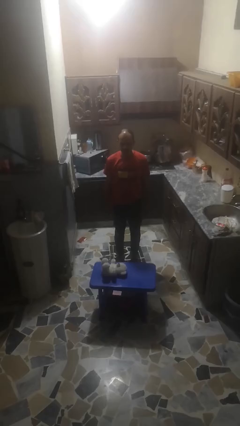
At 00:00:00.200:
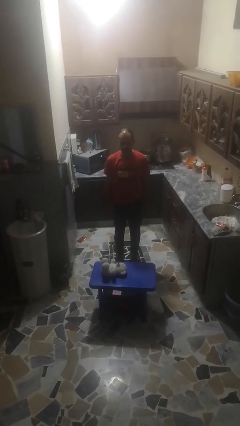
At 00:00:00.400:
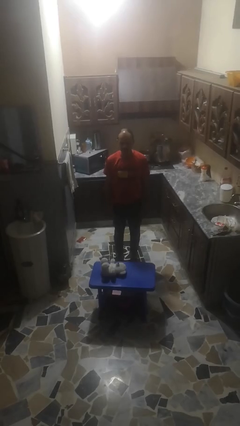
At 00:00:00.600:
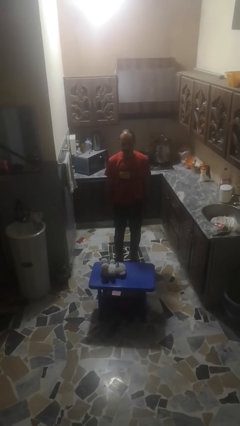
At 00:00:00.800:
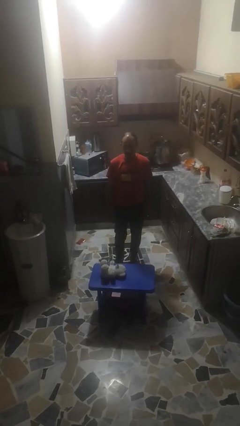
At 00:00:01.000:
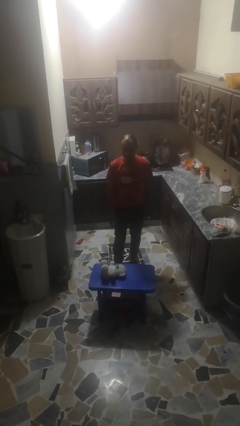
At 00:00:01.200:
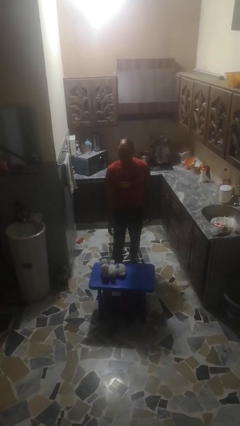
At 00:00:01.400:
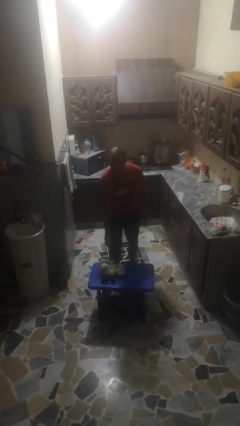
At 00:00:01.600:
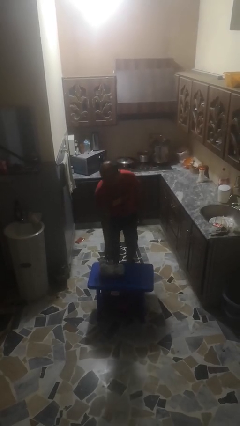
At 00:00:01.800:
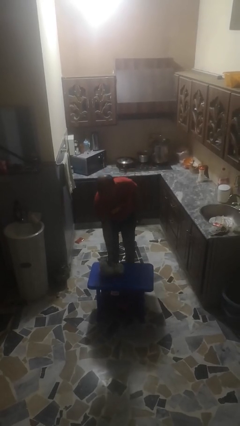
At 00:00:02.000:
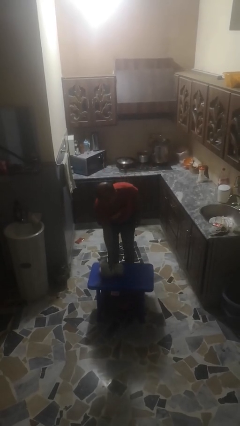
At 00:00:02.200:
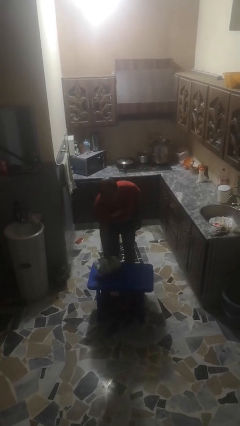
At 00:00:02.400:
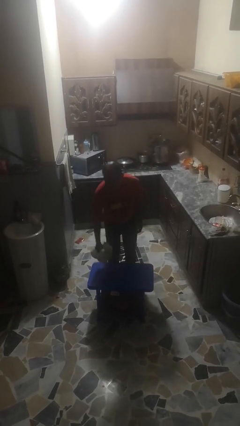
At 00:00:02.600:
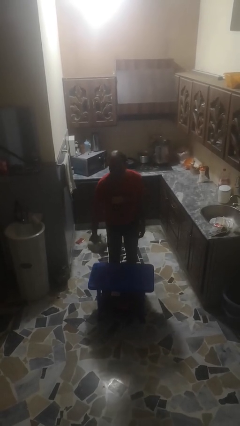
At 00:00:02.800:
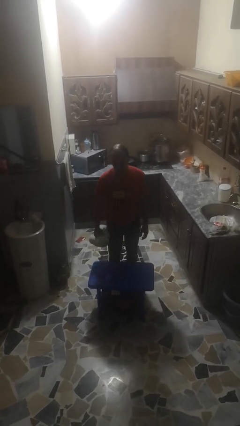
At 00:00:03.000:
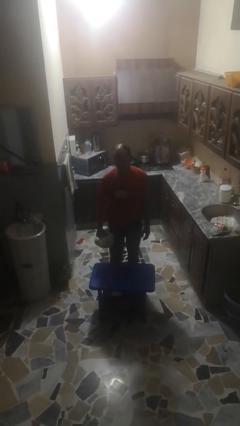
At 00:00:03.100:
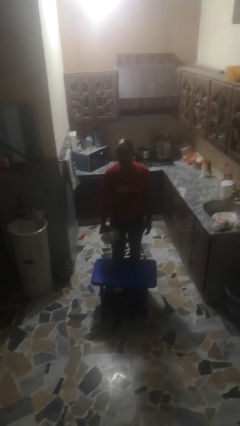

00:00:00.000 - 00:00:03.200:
person picks up object from floor

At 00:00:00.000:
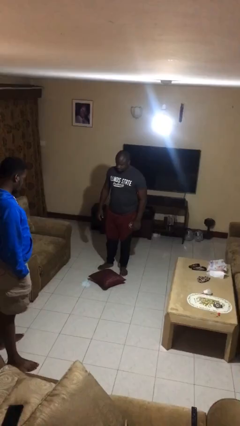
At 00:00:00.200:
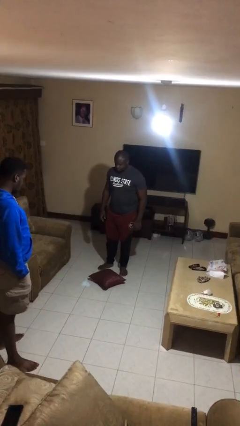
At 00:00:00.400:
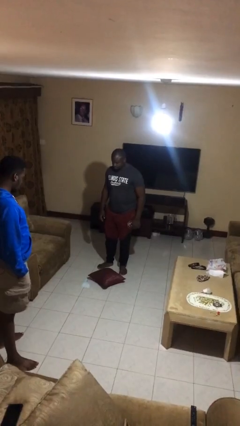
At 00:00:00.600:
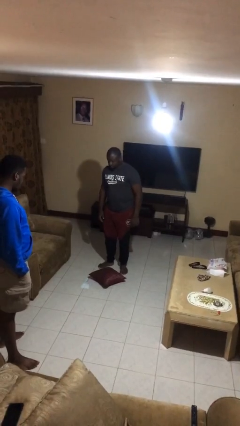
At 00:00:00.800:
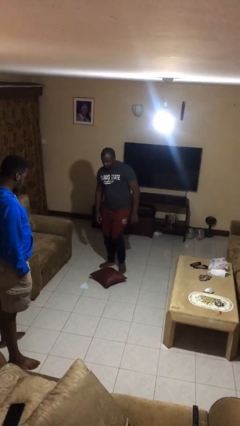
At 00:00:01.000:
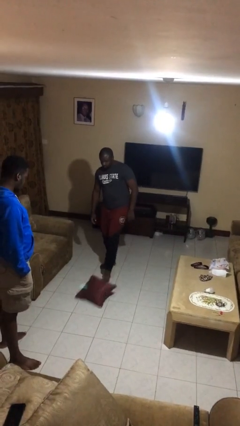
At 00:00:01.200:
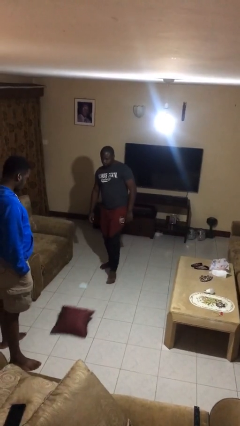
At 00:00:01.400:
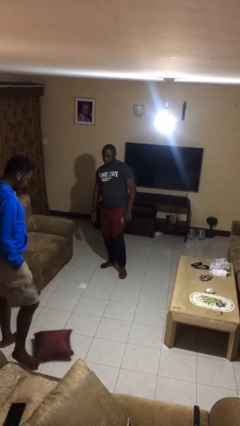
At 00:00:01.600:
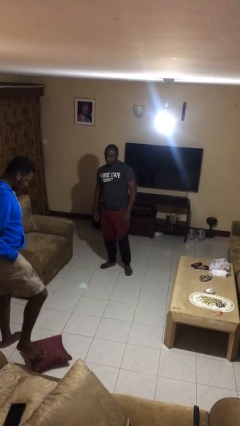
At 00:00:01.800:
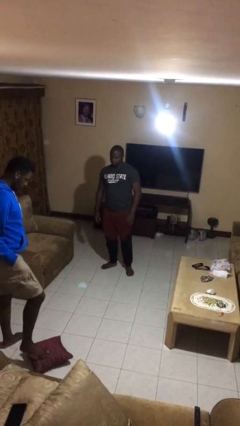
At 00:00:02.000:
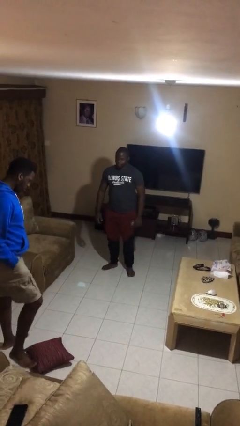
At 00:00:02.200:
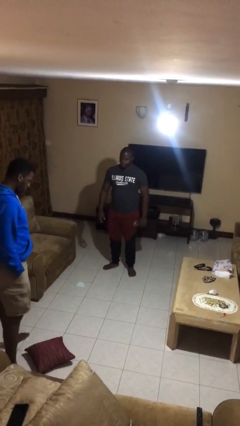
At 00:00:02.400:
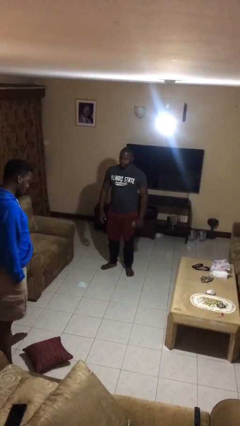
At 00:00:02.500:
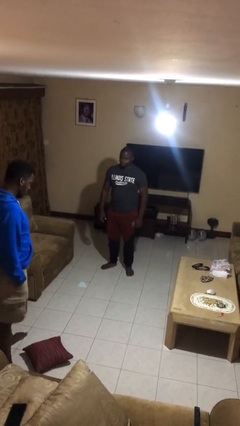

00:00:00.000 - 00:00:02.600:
person kicks object to person

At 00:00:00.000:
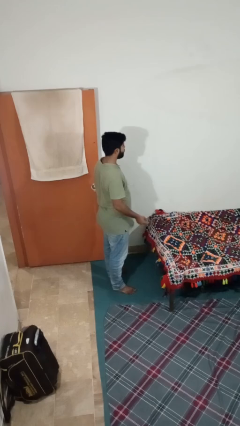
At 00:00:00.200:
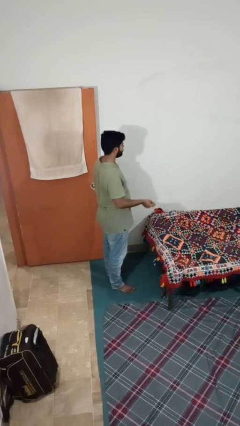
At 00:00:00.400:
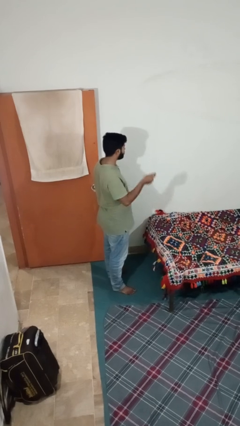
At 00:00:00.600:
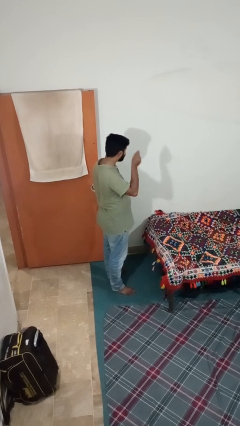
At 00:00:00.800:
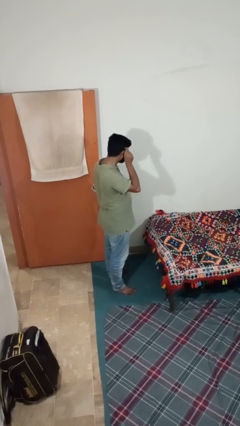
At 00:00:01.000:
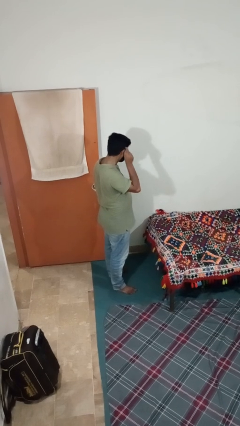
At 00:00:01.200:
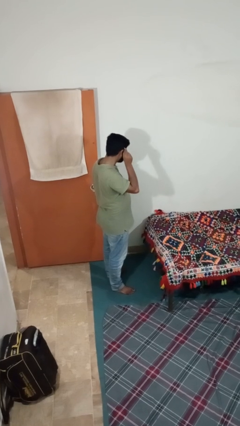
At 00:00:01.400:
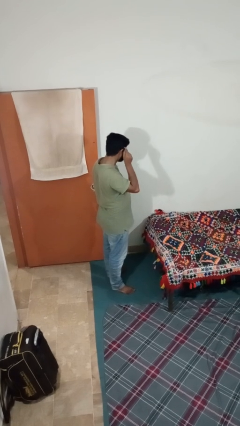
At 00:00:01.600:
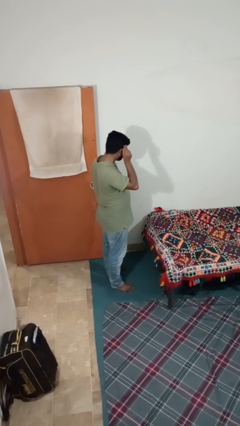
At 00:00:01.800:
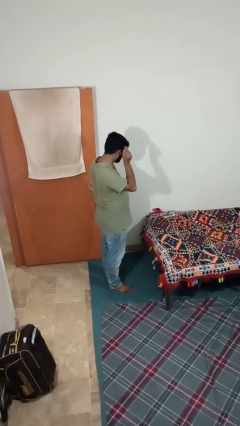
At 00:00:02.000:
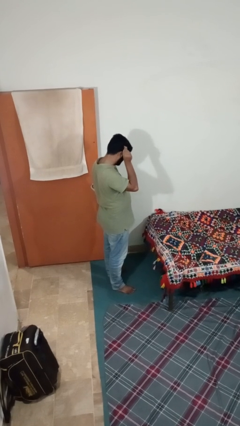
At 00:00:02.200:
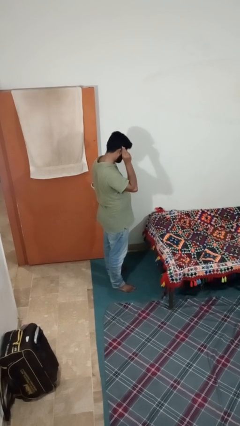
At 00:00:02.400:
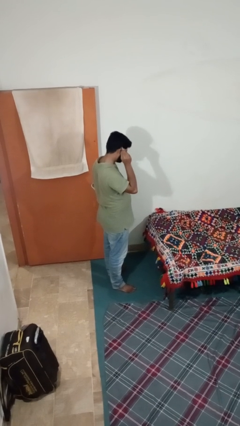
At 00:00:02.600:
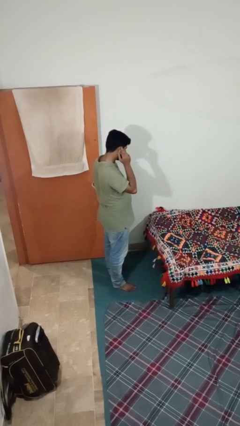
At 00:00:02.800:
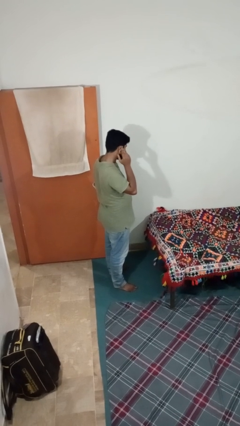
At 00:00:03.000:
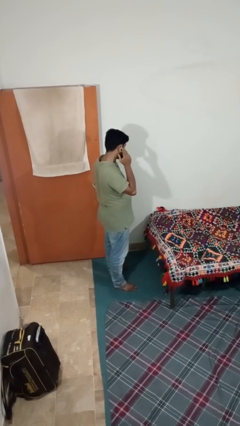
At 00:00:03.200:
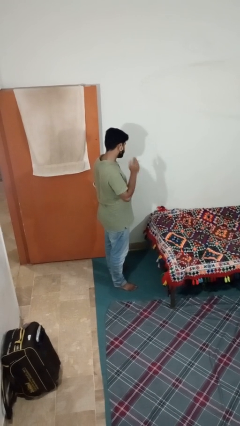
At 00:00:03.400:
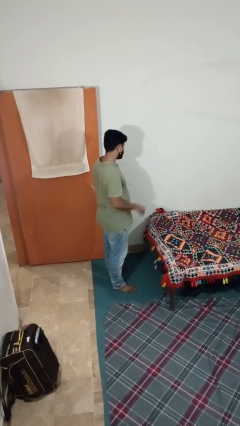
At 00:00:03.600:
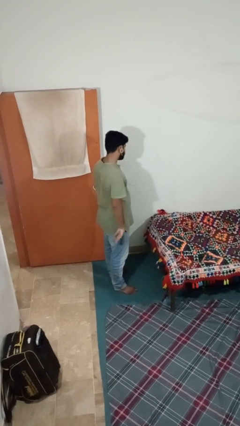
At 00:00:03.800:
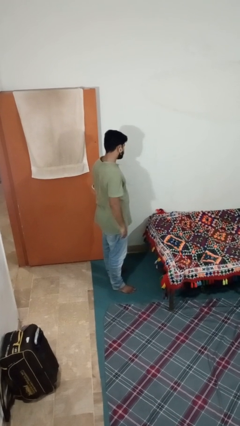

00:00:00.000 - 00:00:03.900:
person puts on earrings

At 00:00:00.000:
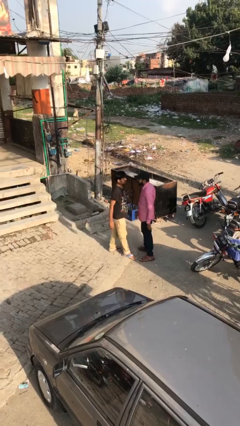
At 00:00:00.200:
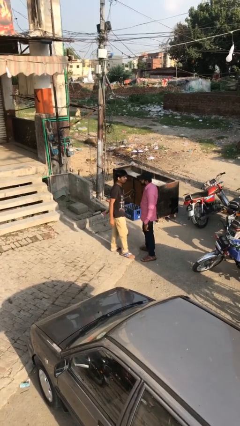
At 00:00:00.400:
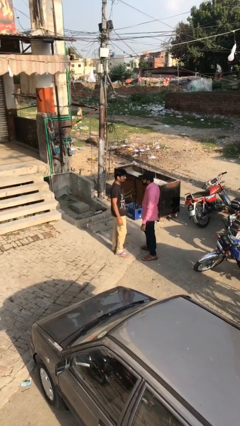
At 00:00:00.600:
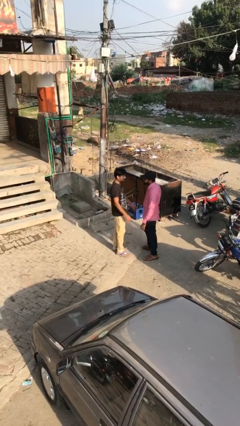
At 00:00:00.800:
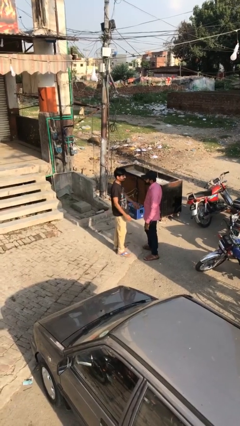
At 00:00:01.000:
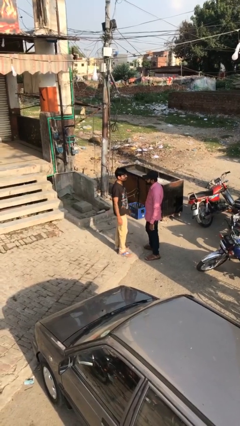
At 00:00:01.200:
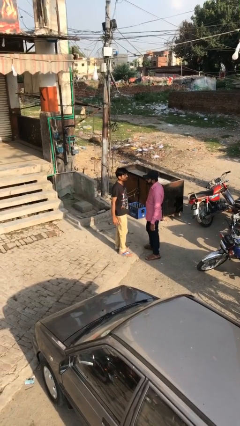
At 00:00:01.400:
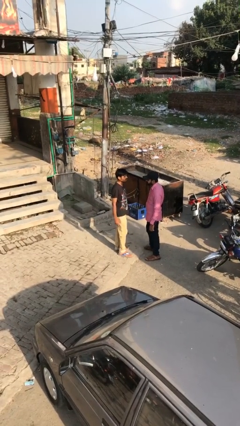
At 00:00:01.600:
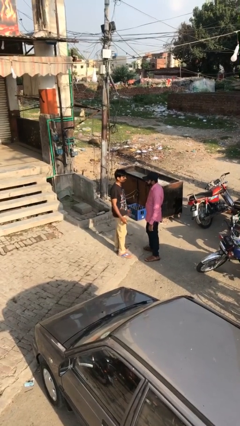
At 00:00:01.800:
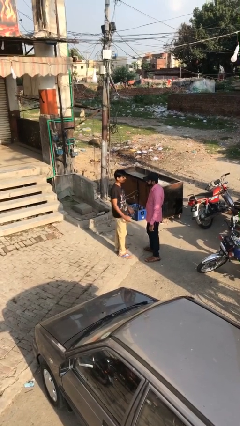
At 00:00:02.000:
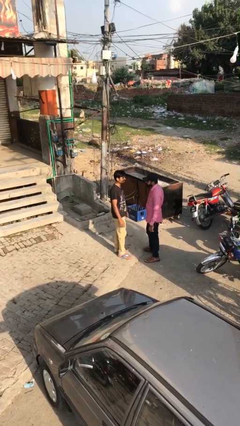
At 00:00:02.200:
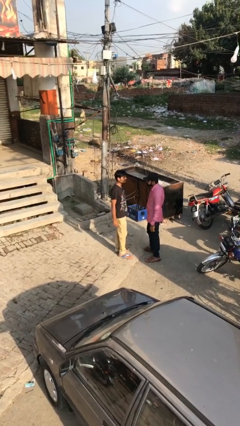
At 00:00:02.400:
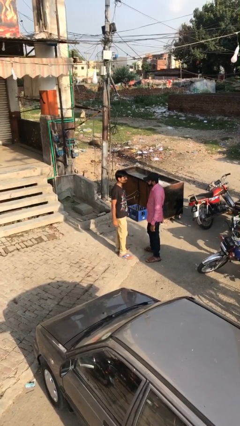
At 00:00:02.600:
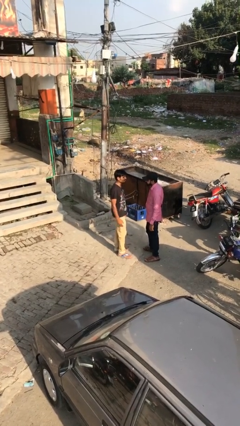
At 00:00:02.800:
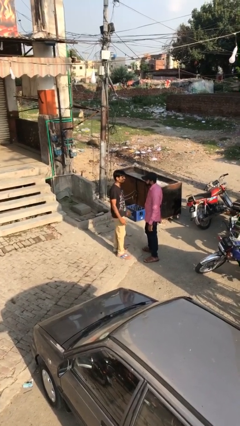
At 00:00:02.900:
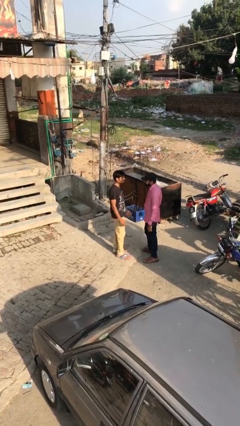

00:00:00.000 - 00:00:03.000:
person talks to person

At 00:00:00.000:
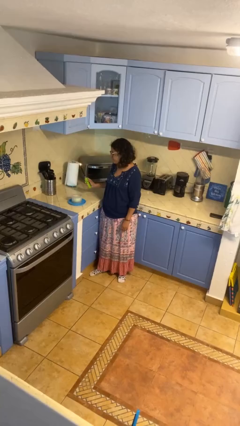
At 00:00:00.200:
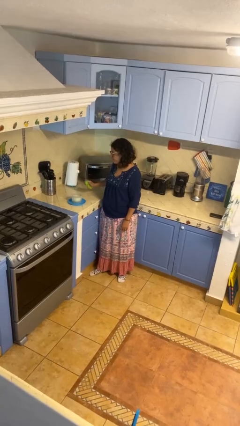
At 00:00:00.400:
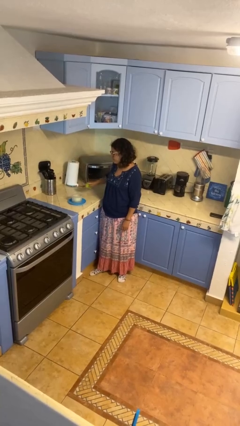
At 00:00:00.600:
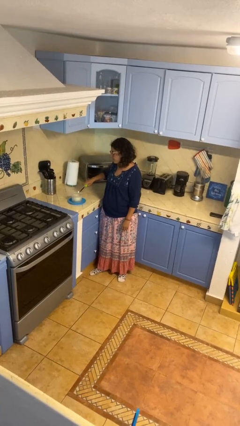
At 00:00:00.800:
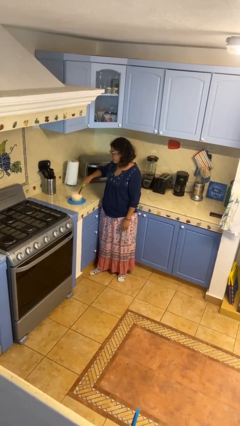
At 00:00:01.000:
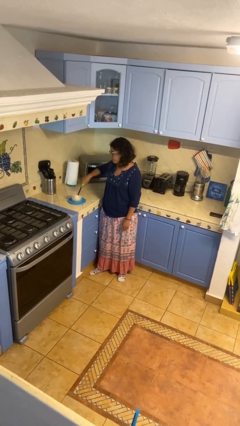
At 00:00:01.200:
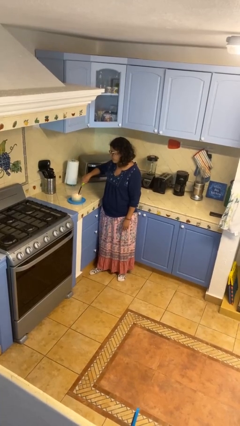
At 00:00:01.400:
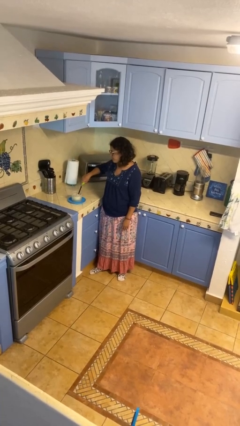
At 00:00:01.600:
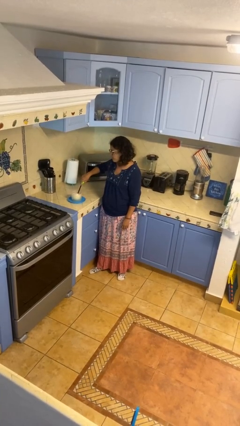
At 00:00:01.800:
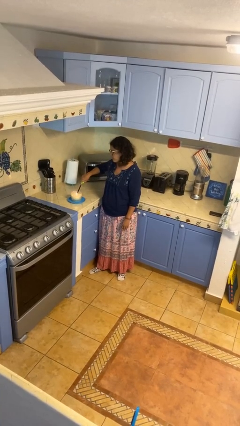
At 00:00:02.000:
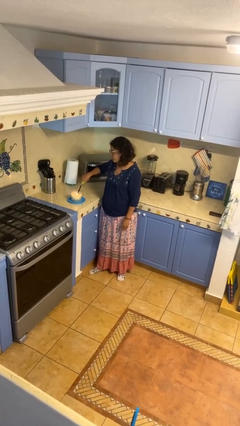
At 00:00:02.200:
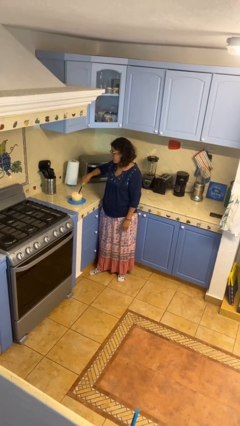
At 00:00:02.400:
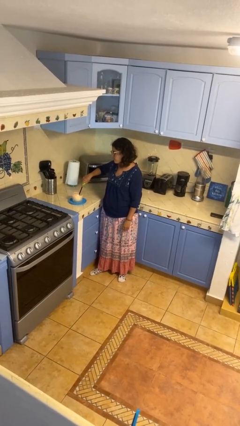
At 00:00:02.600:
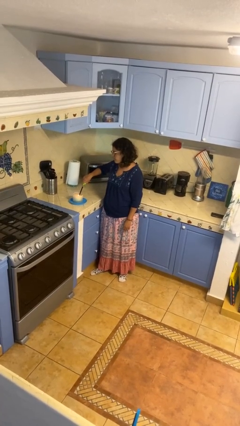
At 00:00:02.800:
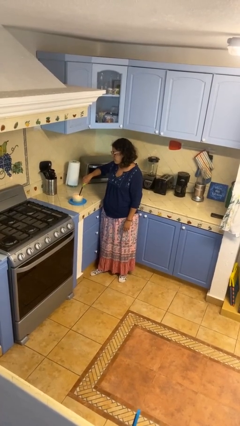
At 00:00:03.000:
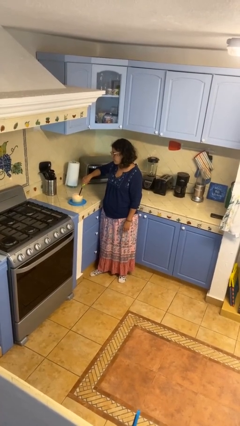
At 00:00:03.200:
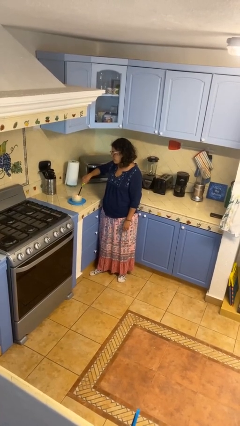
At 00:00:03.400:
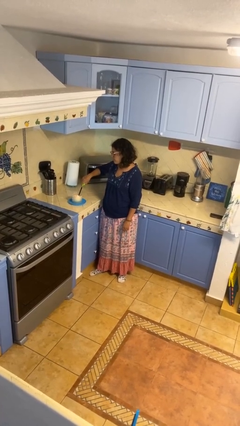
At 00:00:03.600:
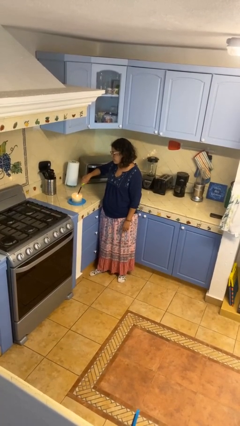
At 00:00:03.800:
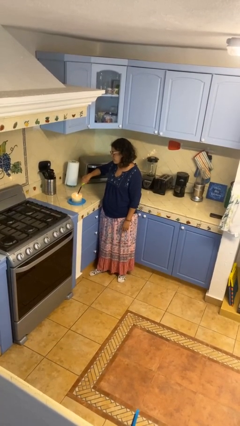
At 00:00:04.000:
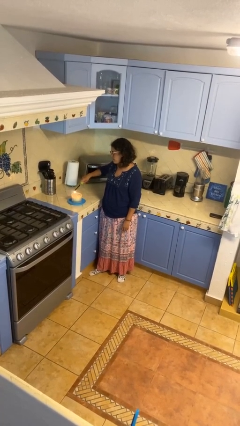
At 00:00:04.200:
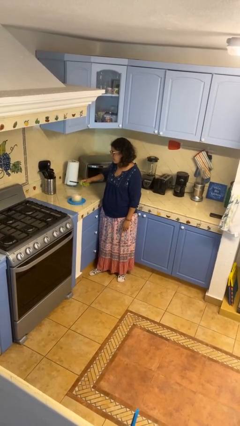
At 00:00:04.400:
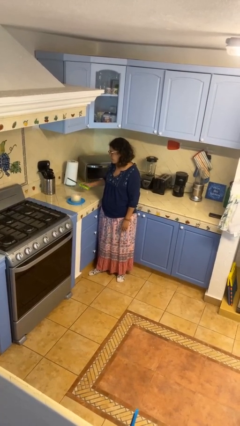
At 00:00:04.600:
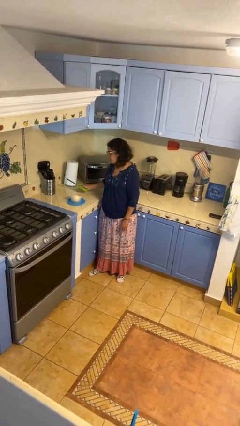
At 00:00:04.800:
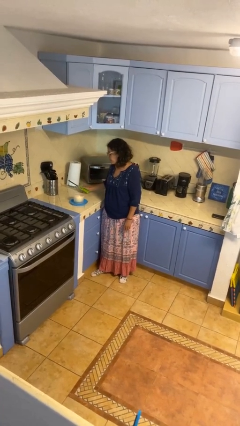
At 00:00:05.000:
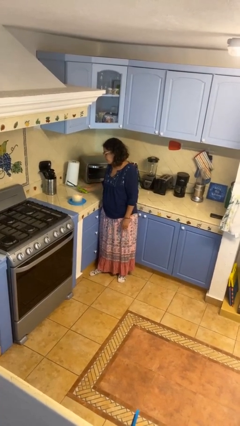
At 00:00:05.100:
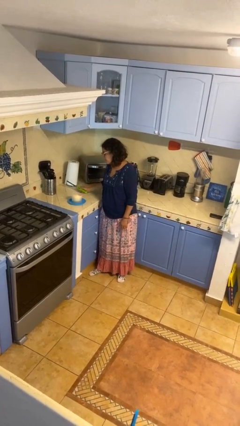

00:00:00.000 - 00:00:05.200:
person lights candle
